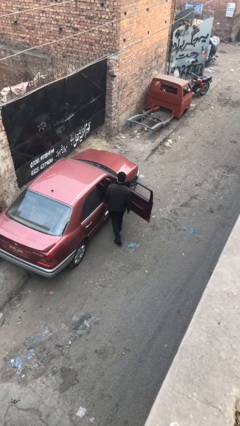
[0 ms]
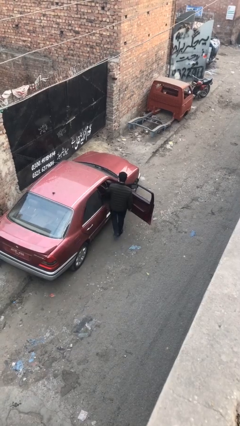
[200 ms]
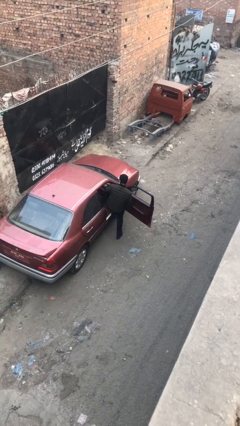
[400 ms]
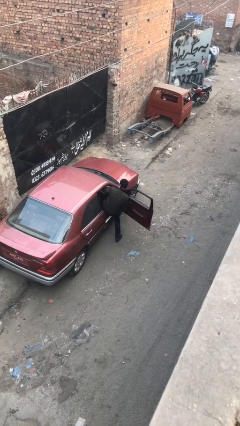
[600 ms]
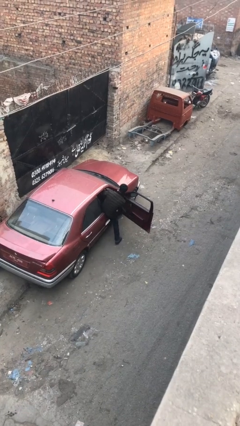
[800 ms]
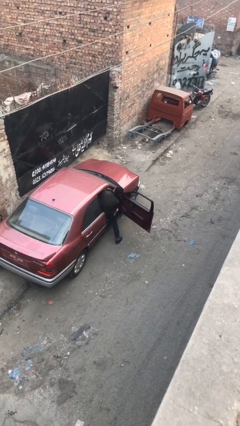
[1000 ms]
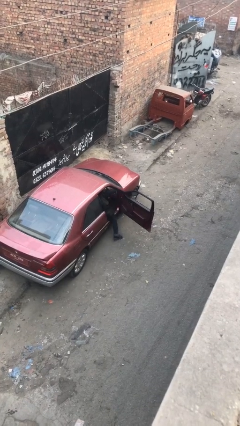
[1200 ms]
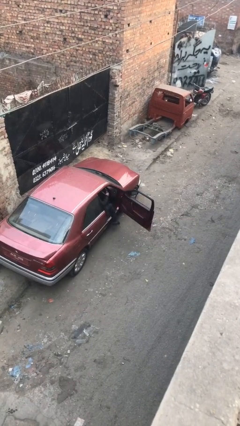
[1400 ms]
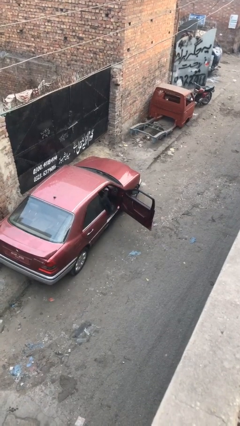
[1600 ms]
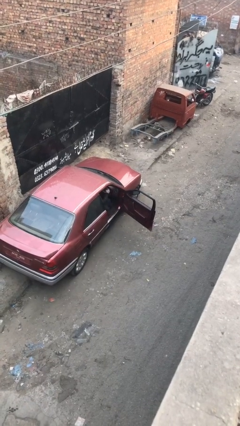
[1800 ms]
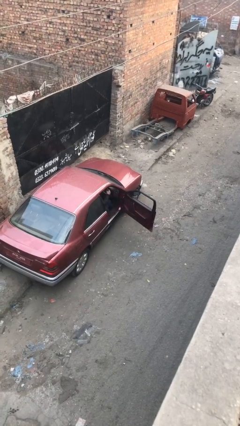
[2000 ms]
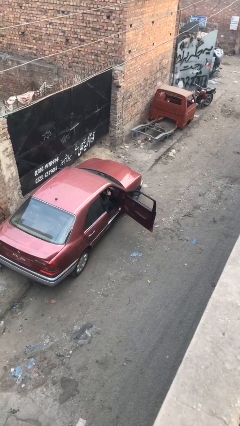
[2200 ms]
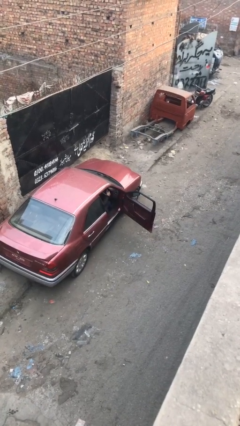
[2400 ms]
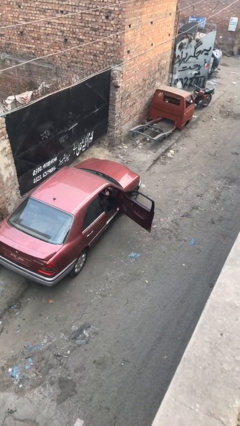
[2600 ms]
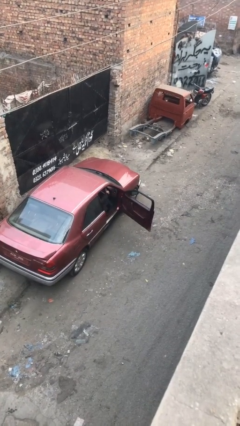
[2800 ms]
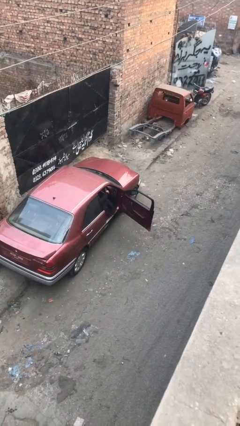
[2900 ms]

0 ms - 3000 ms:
person enters car

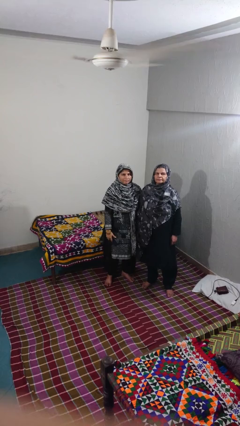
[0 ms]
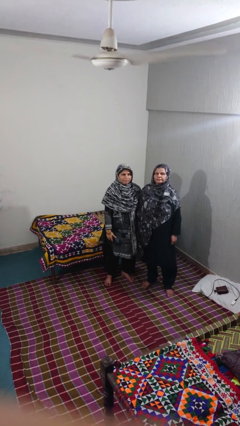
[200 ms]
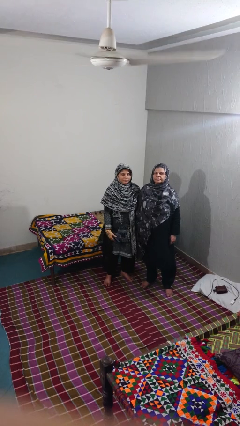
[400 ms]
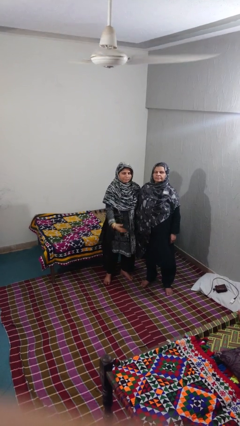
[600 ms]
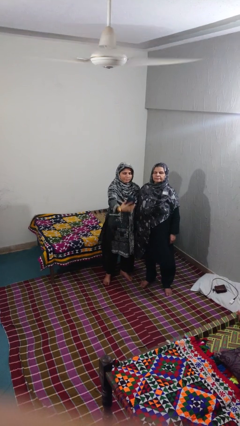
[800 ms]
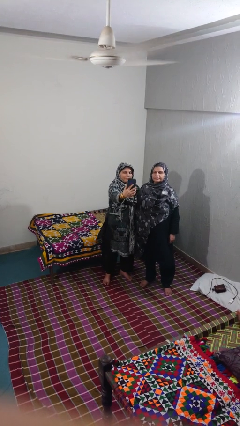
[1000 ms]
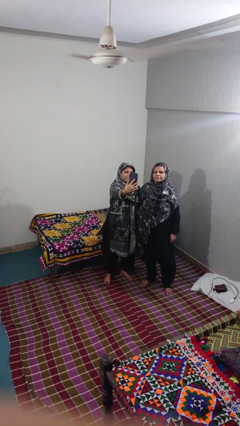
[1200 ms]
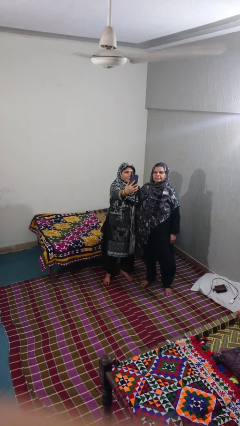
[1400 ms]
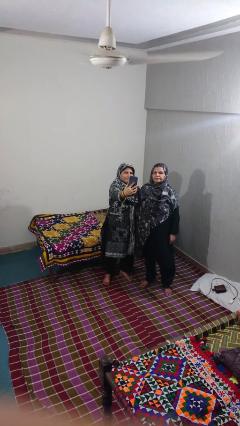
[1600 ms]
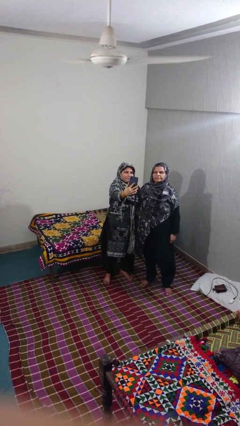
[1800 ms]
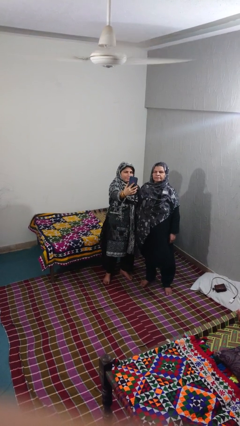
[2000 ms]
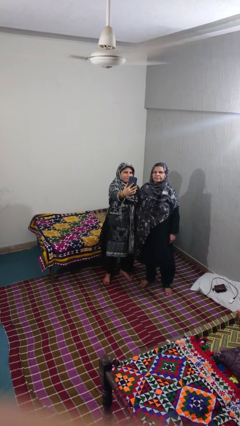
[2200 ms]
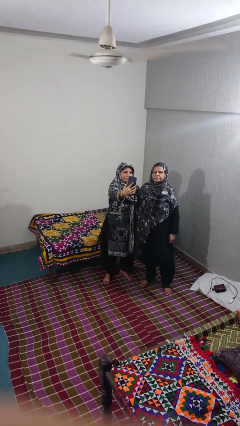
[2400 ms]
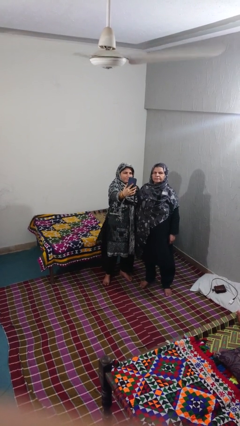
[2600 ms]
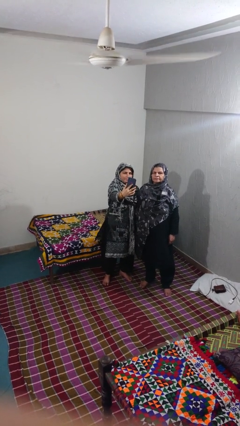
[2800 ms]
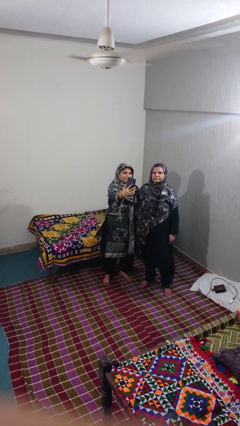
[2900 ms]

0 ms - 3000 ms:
person takes selfie with person

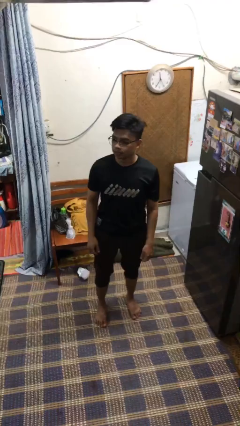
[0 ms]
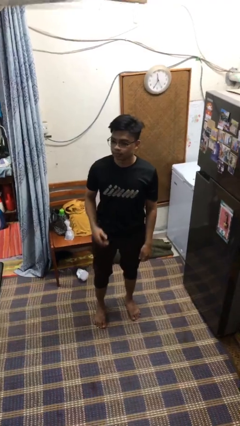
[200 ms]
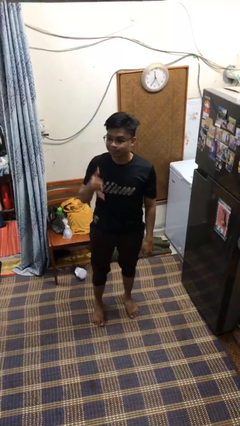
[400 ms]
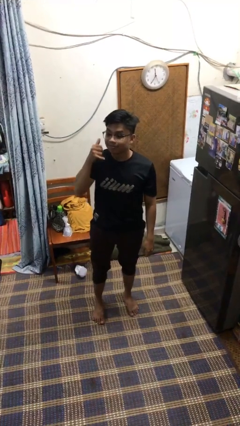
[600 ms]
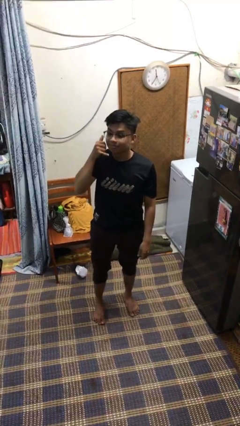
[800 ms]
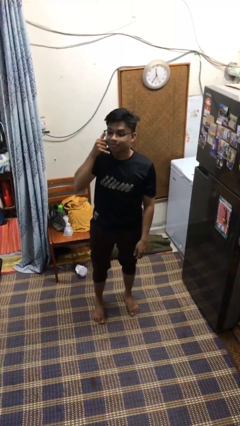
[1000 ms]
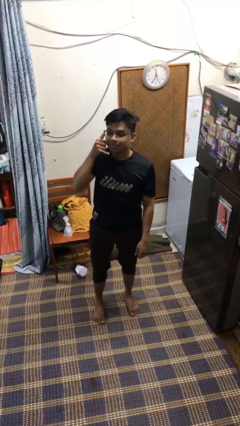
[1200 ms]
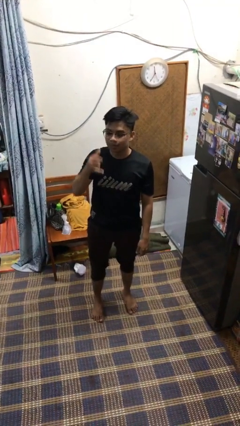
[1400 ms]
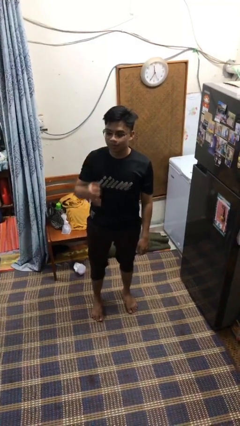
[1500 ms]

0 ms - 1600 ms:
person gestures call me

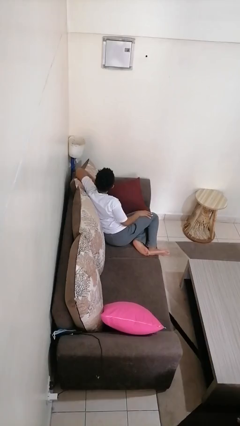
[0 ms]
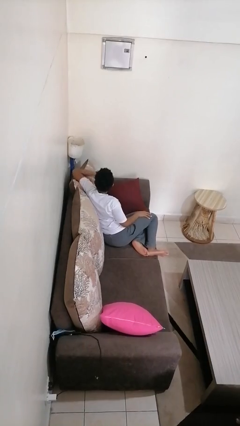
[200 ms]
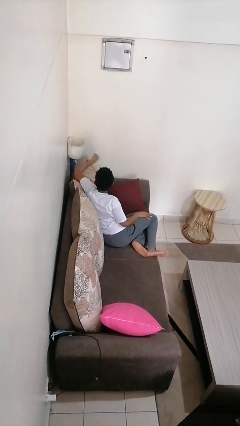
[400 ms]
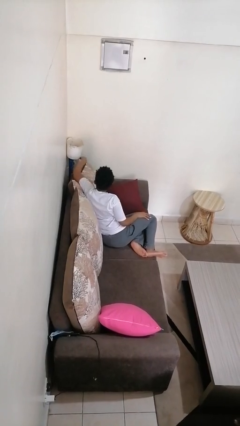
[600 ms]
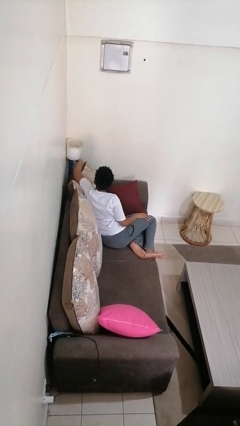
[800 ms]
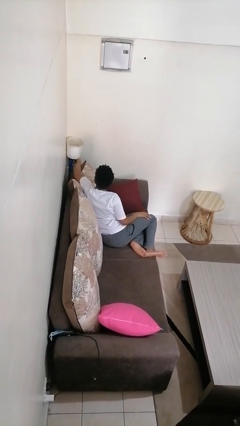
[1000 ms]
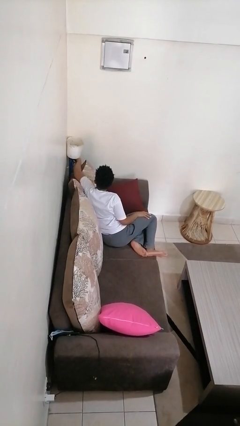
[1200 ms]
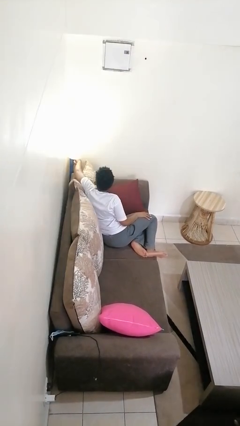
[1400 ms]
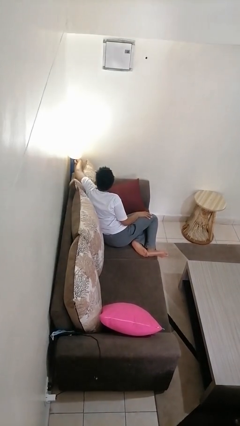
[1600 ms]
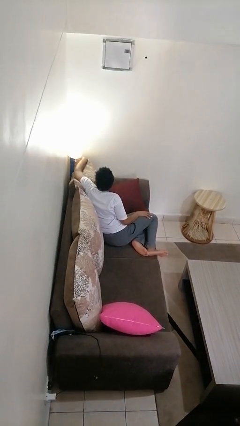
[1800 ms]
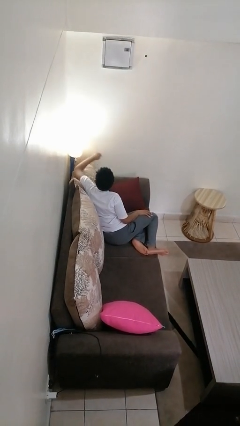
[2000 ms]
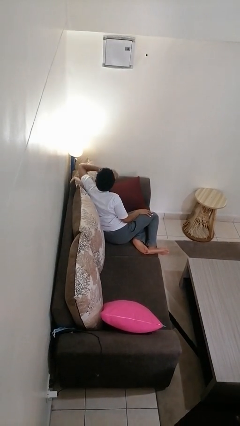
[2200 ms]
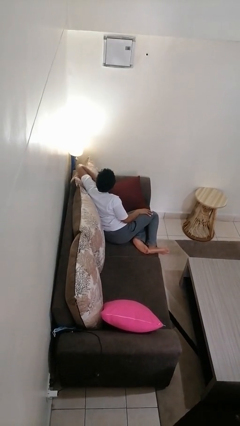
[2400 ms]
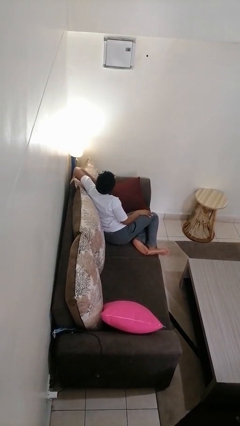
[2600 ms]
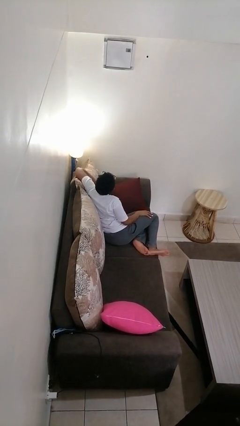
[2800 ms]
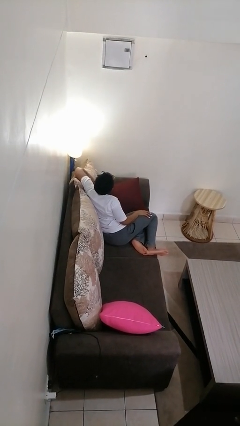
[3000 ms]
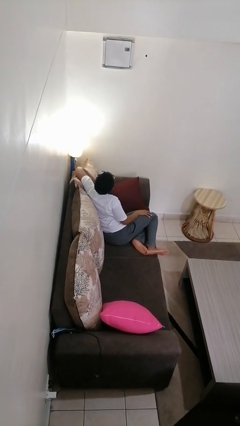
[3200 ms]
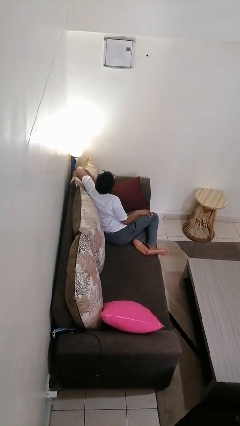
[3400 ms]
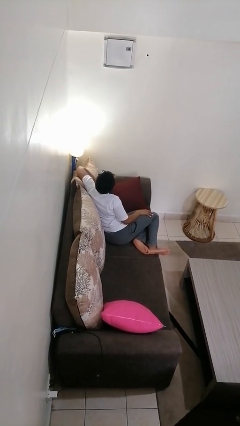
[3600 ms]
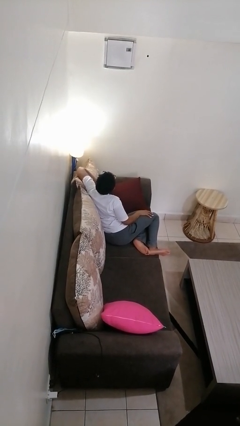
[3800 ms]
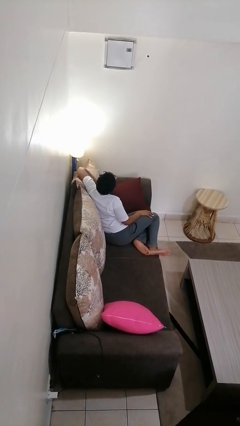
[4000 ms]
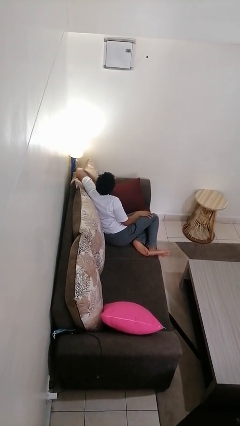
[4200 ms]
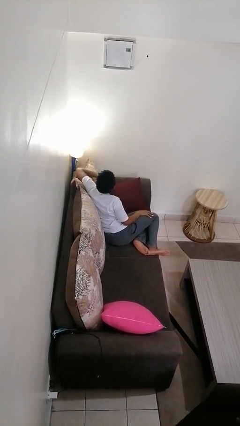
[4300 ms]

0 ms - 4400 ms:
person turns on lamp

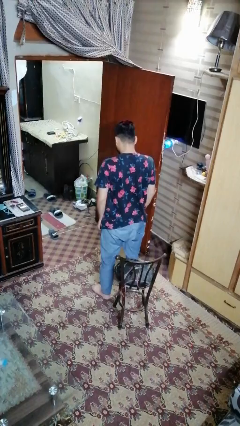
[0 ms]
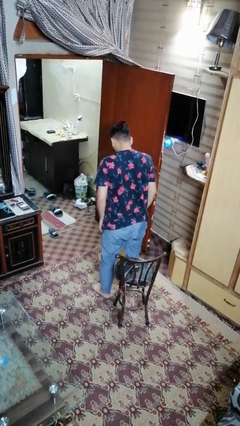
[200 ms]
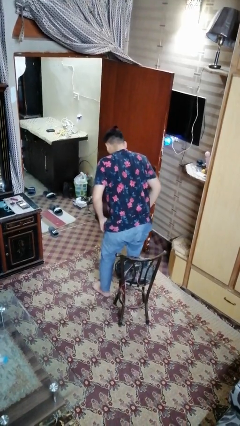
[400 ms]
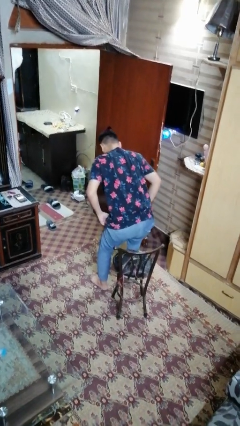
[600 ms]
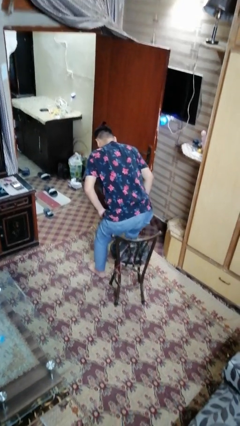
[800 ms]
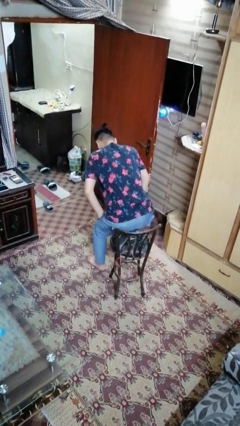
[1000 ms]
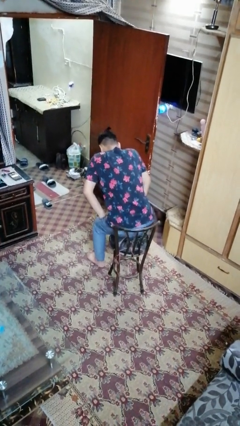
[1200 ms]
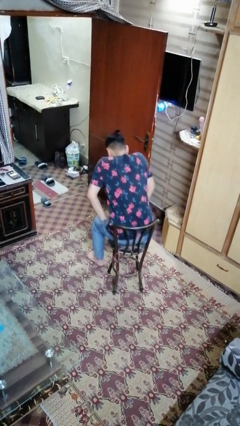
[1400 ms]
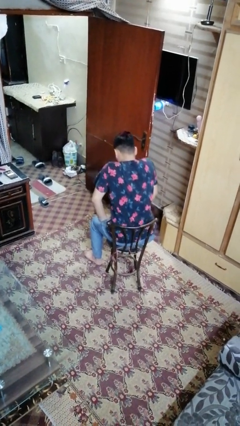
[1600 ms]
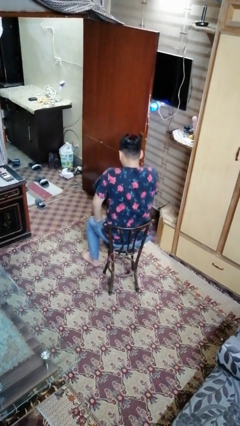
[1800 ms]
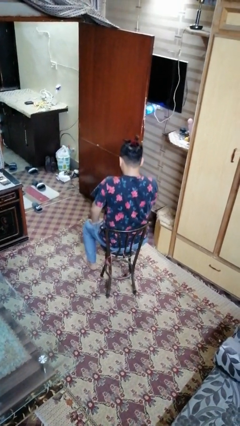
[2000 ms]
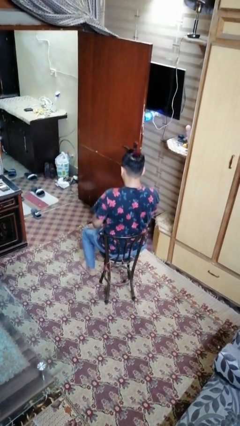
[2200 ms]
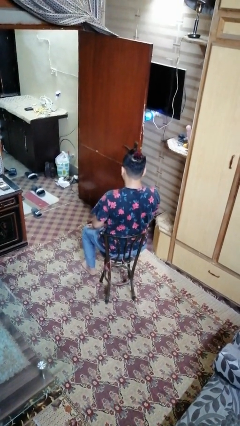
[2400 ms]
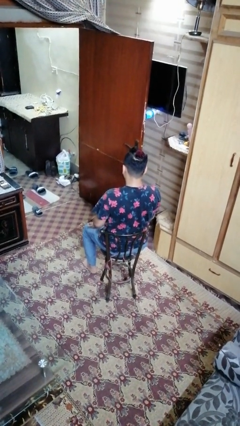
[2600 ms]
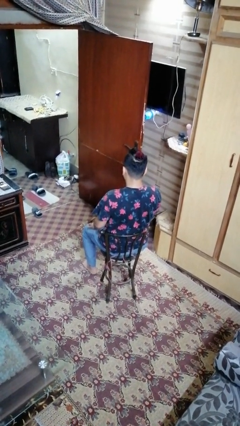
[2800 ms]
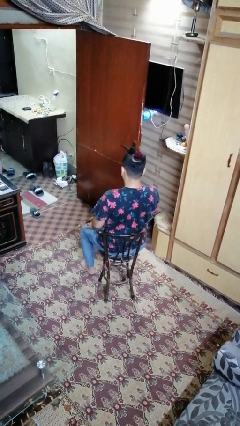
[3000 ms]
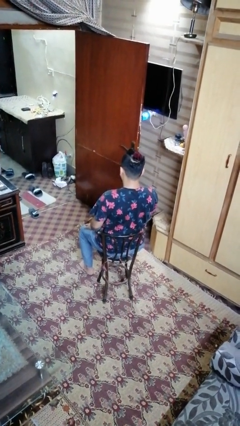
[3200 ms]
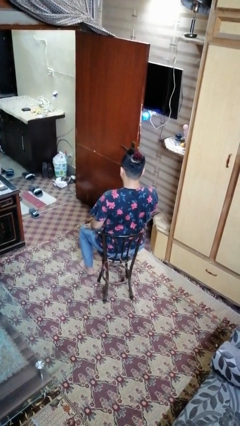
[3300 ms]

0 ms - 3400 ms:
person sits down

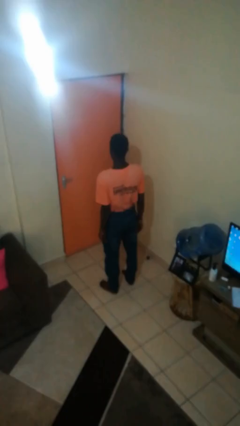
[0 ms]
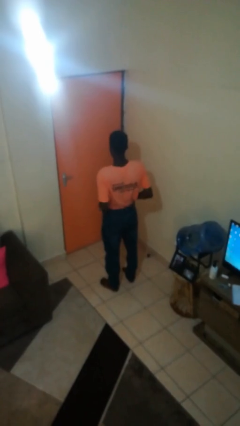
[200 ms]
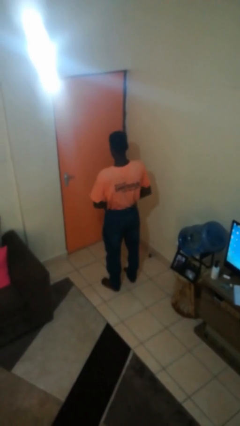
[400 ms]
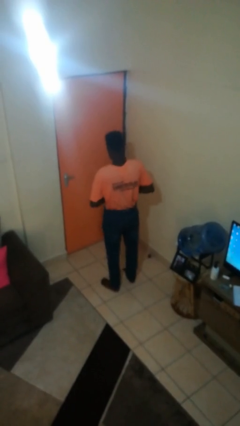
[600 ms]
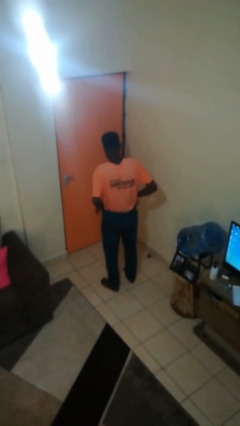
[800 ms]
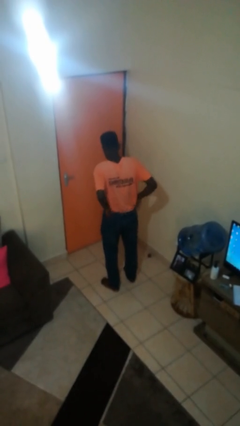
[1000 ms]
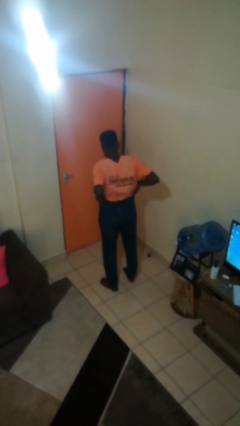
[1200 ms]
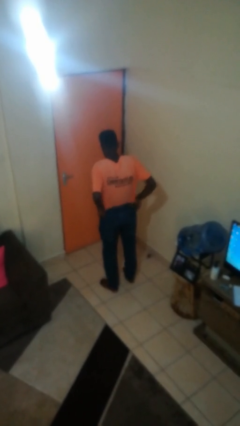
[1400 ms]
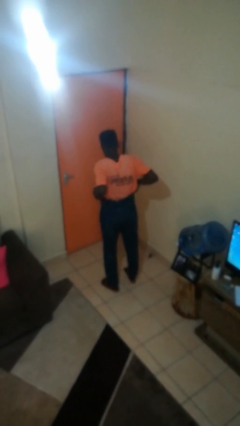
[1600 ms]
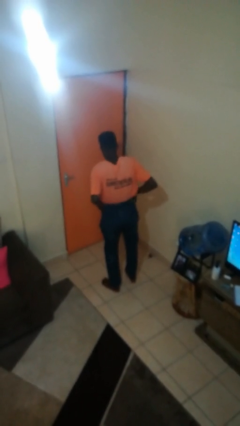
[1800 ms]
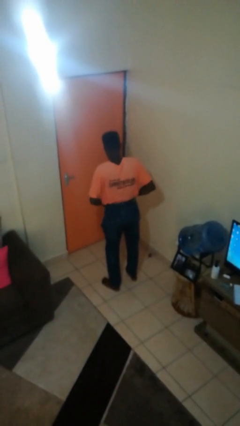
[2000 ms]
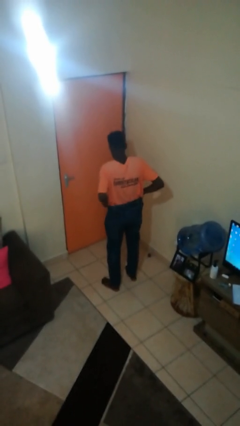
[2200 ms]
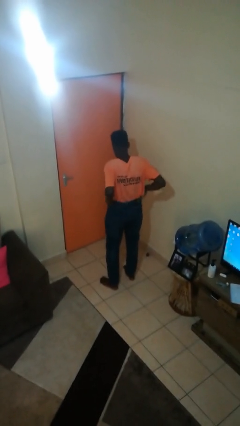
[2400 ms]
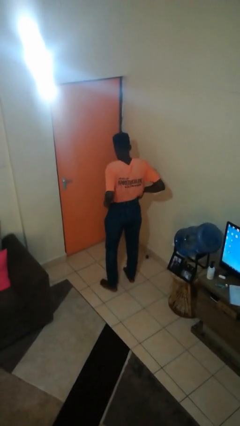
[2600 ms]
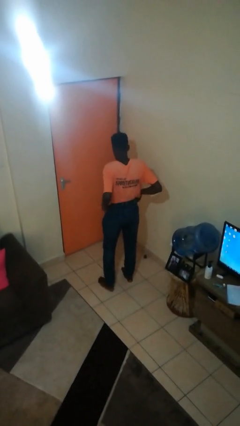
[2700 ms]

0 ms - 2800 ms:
person hikes up pants
